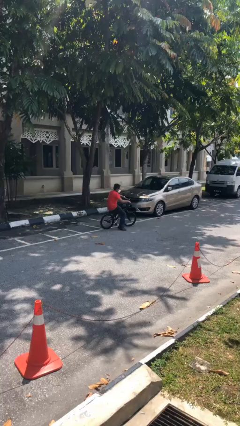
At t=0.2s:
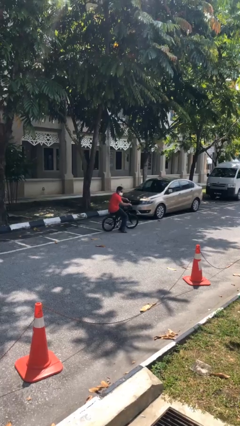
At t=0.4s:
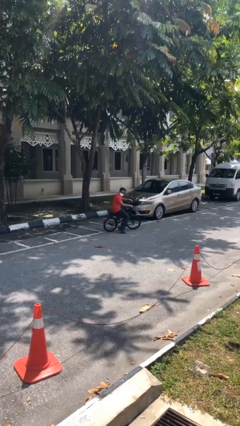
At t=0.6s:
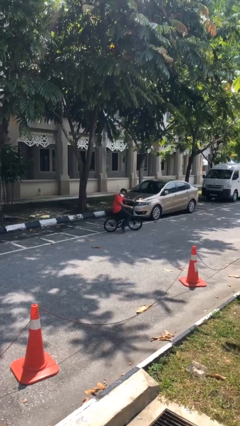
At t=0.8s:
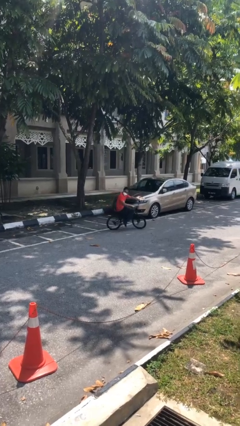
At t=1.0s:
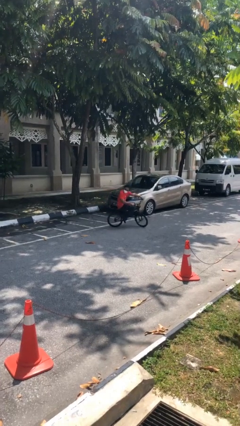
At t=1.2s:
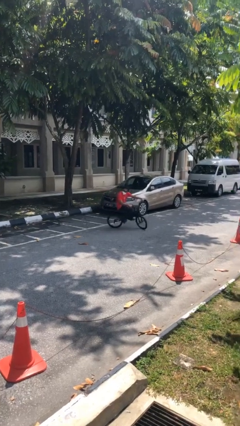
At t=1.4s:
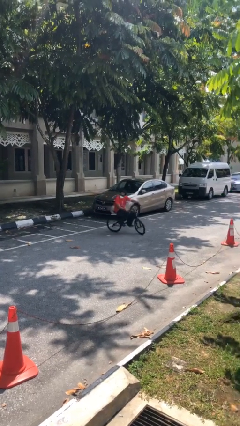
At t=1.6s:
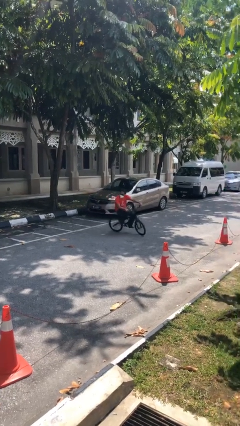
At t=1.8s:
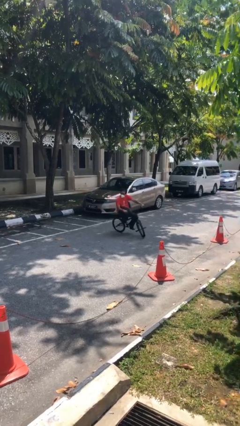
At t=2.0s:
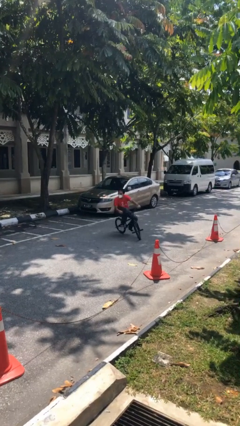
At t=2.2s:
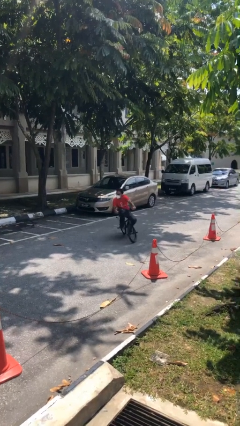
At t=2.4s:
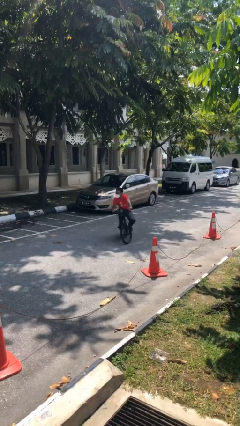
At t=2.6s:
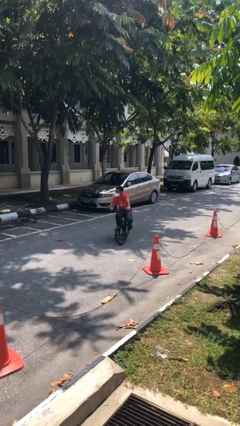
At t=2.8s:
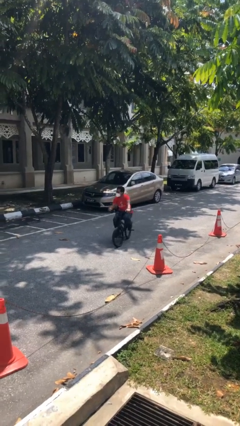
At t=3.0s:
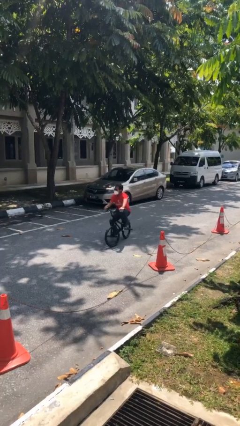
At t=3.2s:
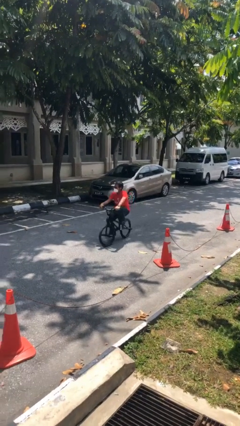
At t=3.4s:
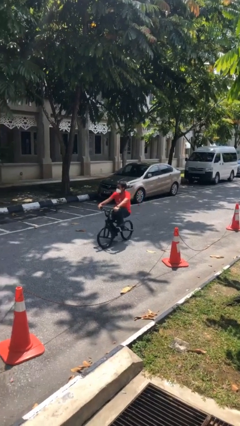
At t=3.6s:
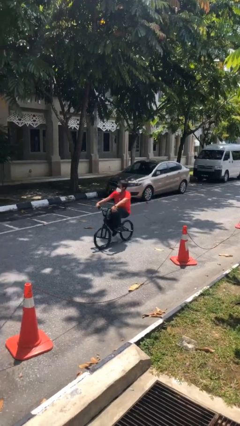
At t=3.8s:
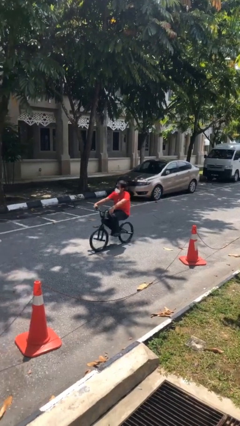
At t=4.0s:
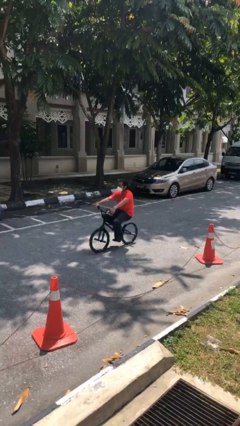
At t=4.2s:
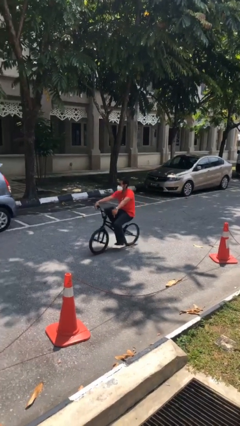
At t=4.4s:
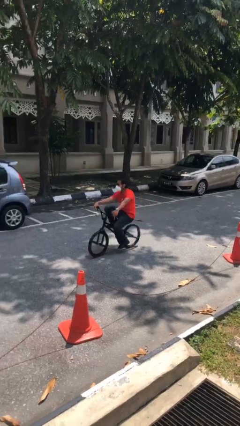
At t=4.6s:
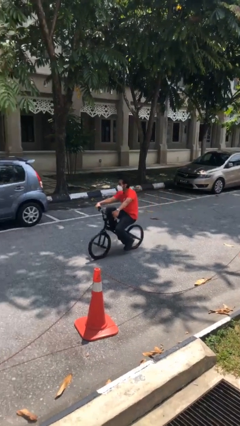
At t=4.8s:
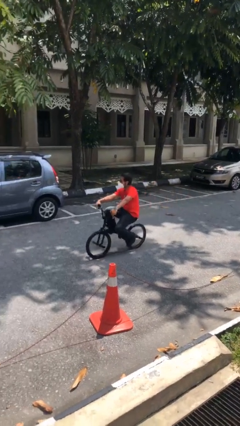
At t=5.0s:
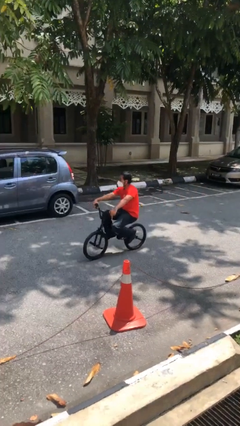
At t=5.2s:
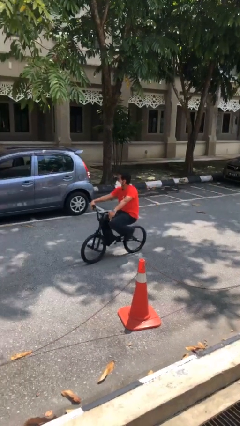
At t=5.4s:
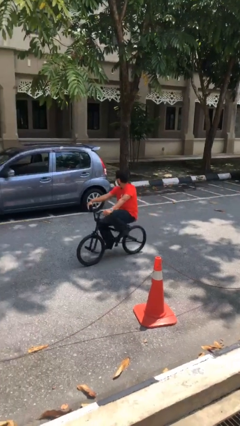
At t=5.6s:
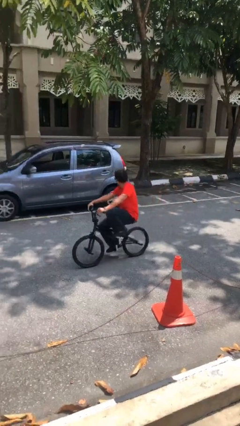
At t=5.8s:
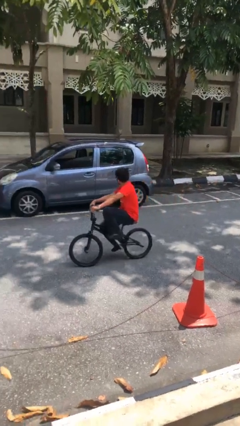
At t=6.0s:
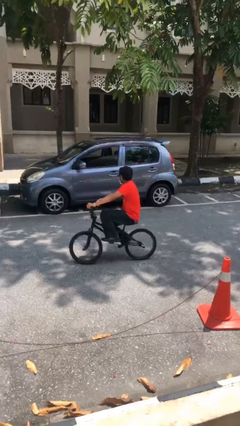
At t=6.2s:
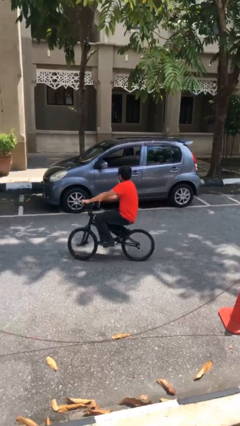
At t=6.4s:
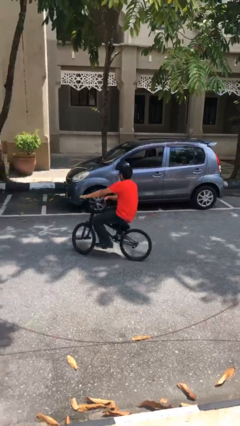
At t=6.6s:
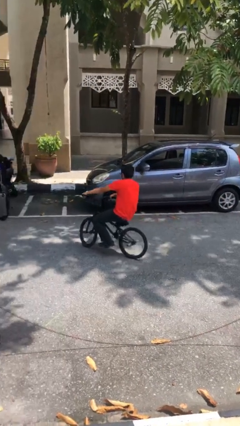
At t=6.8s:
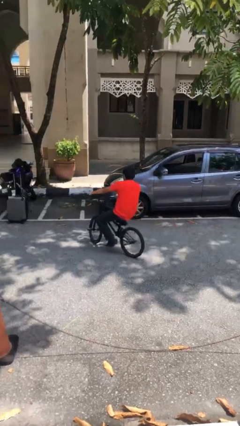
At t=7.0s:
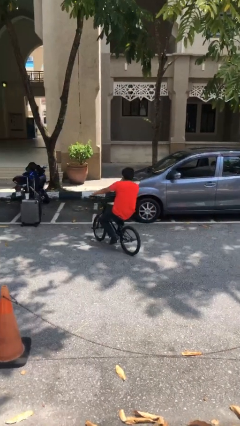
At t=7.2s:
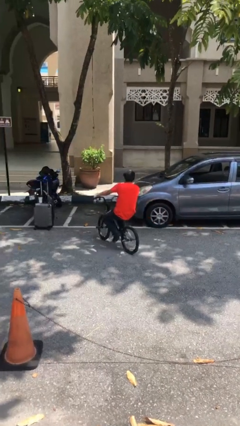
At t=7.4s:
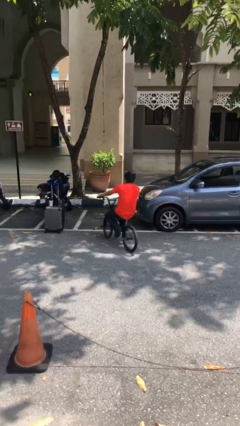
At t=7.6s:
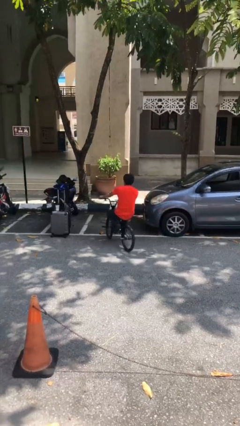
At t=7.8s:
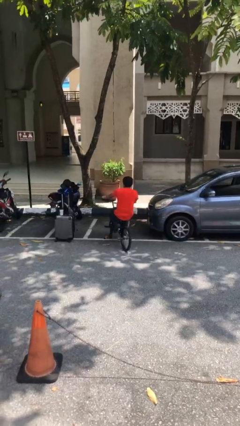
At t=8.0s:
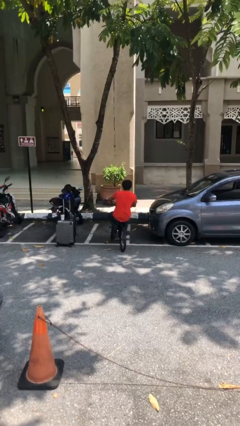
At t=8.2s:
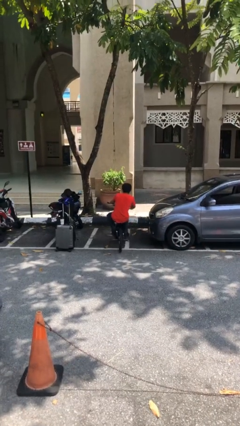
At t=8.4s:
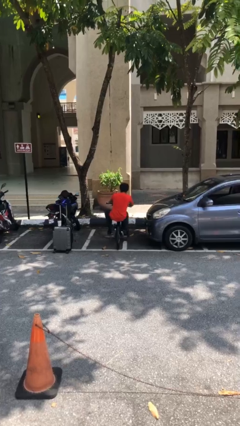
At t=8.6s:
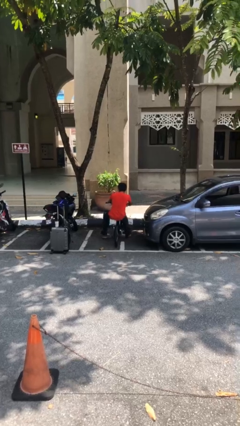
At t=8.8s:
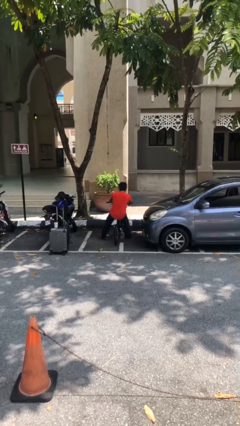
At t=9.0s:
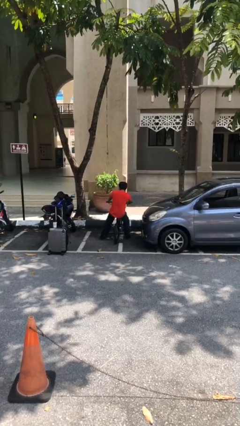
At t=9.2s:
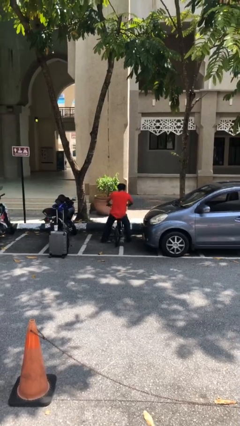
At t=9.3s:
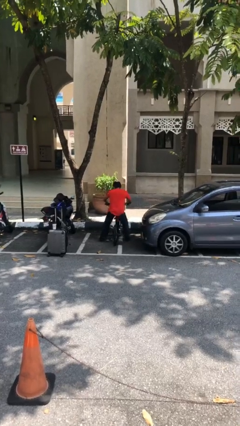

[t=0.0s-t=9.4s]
person rides bicycle

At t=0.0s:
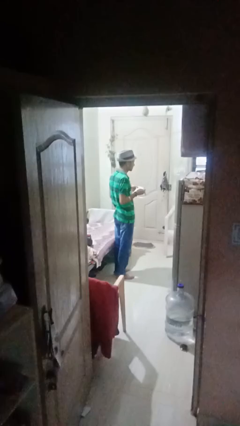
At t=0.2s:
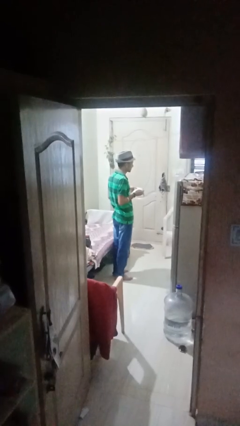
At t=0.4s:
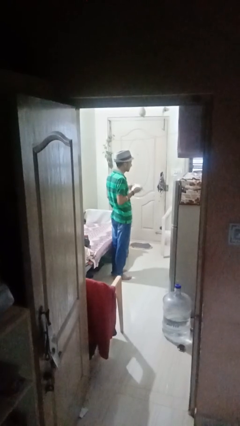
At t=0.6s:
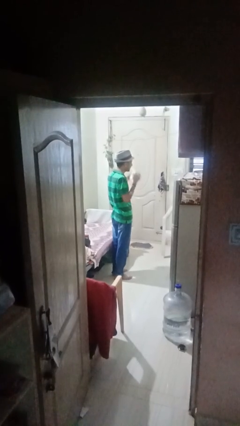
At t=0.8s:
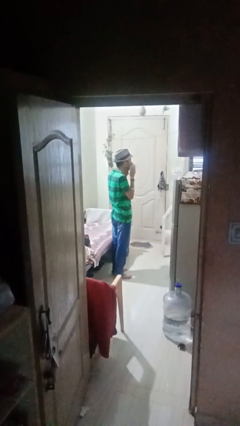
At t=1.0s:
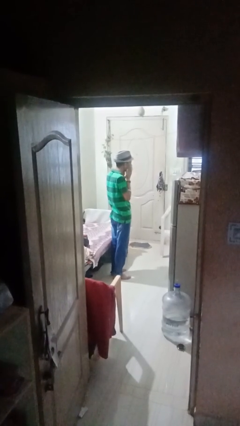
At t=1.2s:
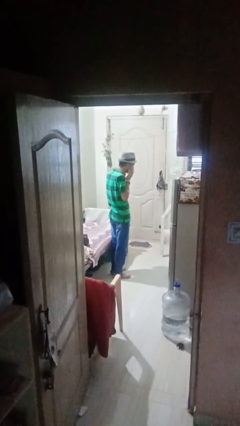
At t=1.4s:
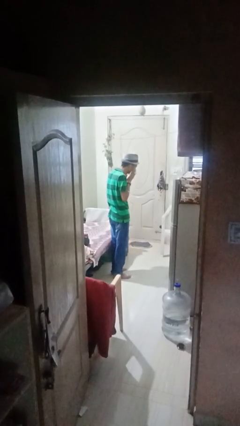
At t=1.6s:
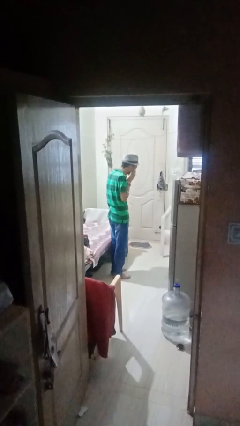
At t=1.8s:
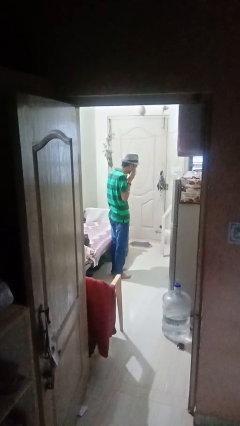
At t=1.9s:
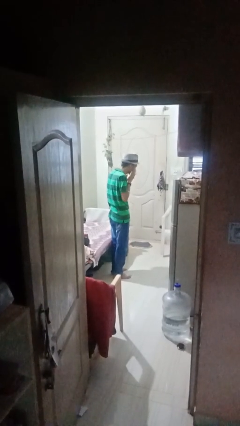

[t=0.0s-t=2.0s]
person blows nose

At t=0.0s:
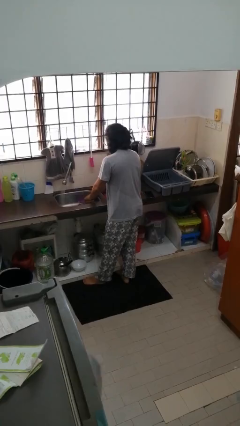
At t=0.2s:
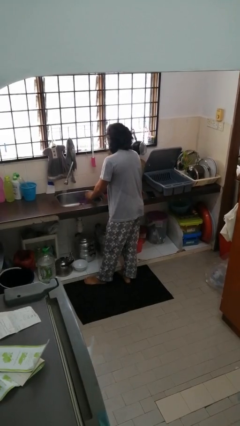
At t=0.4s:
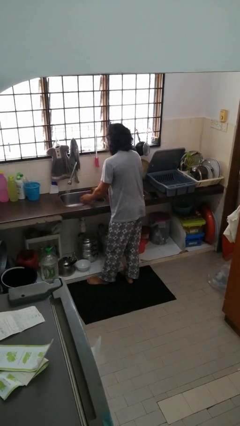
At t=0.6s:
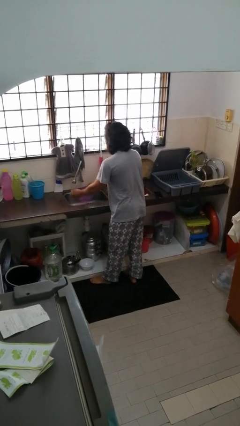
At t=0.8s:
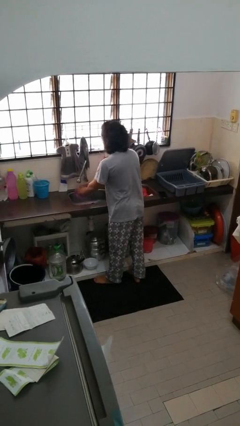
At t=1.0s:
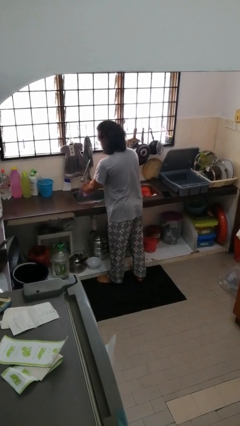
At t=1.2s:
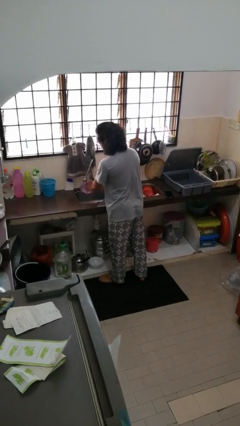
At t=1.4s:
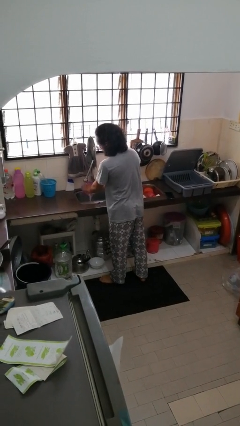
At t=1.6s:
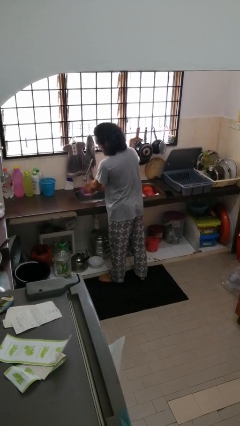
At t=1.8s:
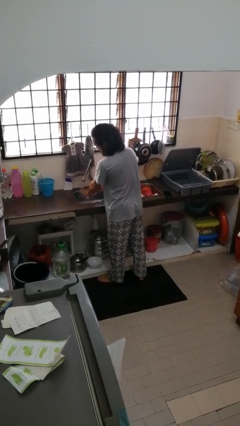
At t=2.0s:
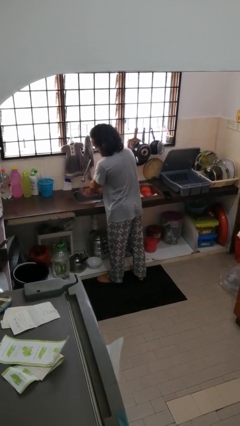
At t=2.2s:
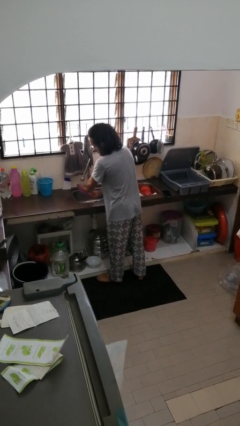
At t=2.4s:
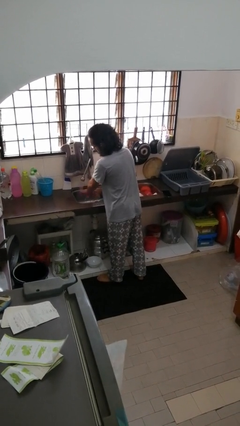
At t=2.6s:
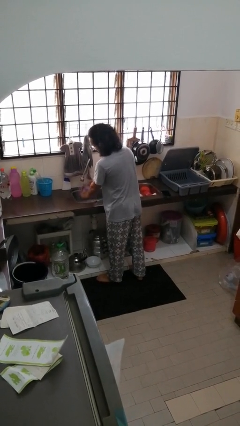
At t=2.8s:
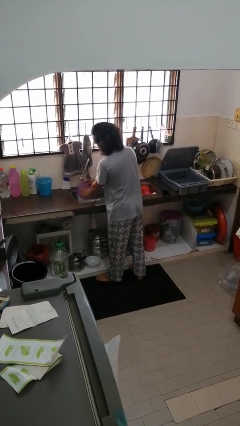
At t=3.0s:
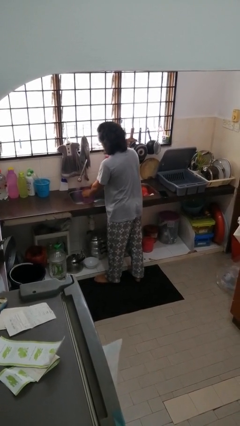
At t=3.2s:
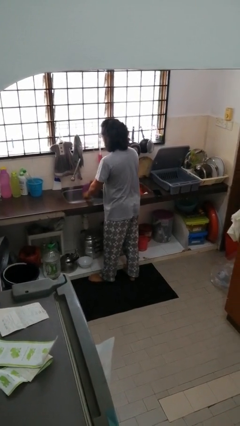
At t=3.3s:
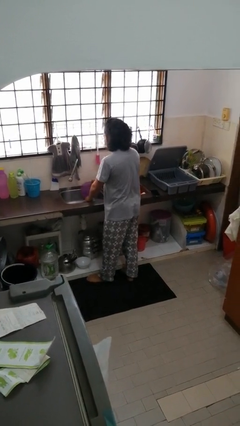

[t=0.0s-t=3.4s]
person washes dish

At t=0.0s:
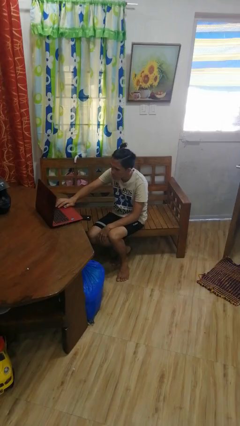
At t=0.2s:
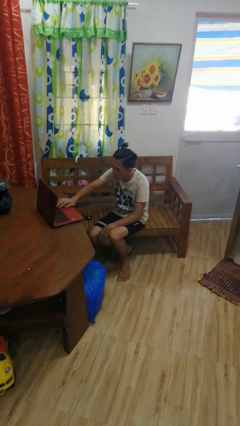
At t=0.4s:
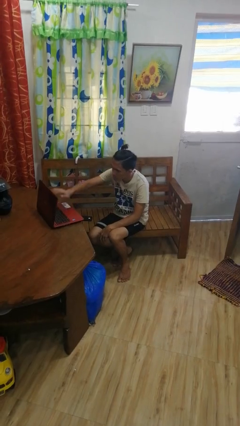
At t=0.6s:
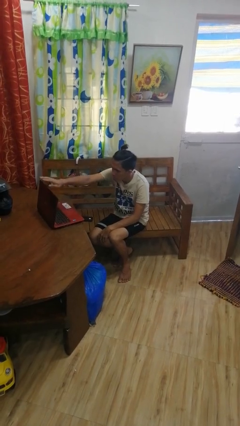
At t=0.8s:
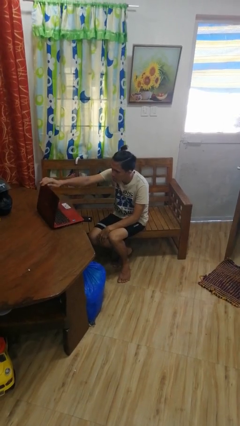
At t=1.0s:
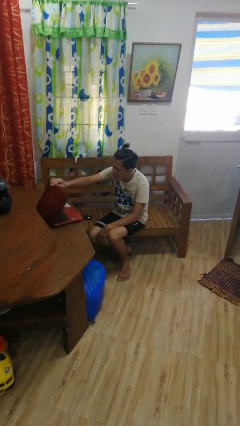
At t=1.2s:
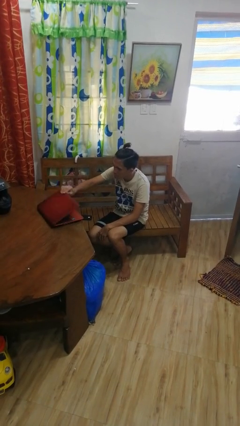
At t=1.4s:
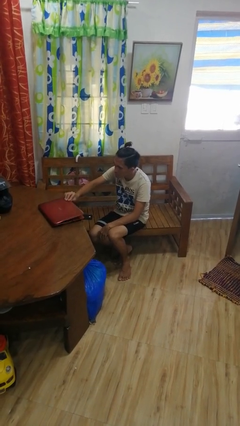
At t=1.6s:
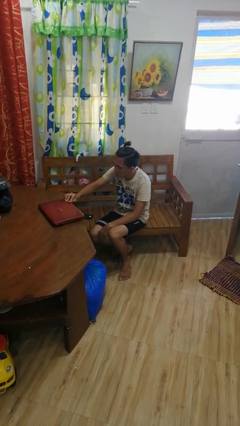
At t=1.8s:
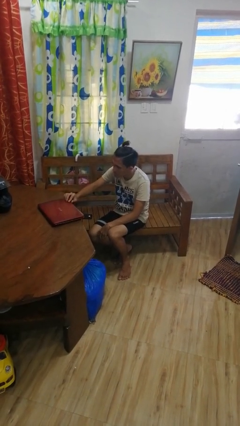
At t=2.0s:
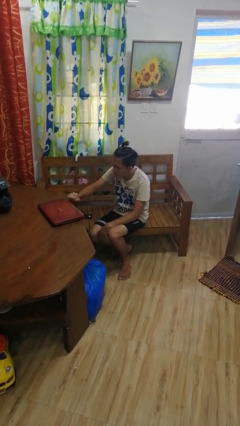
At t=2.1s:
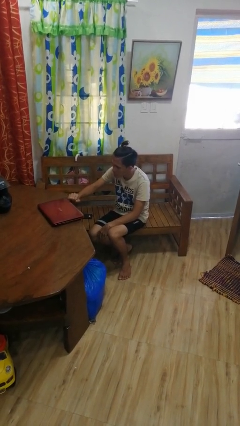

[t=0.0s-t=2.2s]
person closes laptop

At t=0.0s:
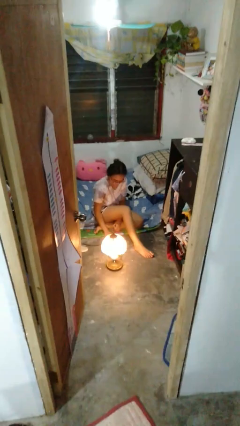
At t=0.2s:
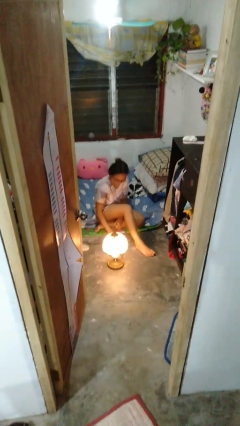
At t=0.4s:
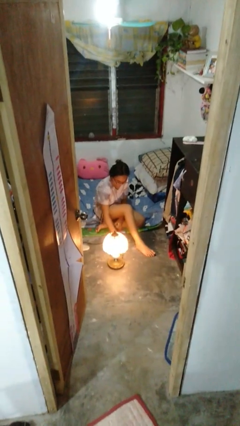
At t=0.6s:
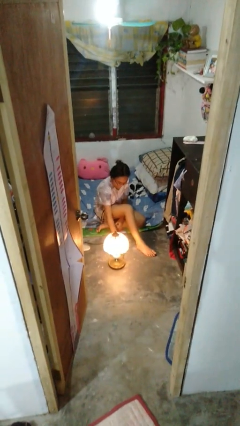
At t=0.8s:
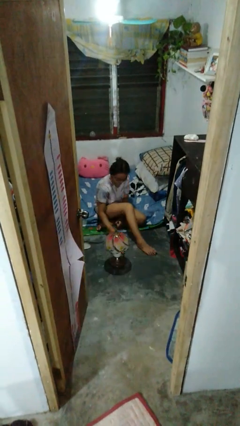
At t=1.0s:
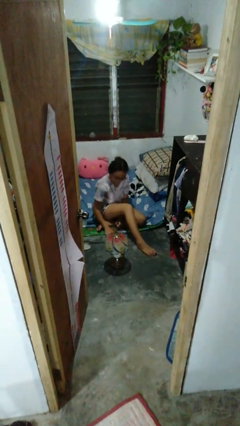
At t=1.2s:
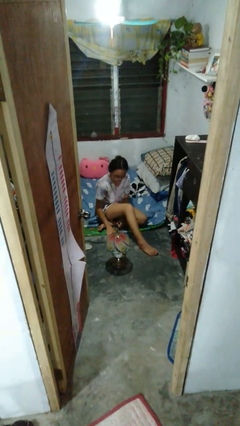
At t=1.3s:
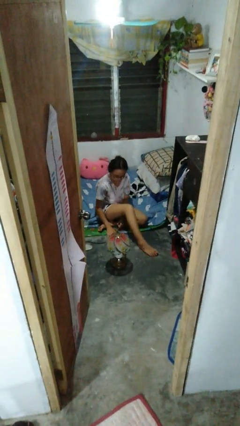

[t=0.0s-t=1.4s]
person turns off lamp
